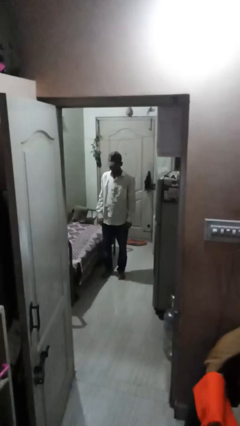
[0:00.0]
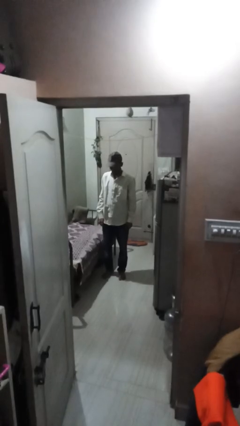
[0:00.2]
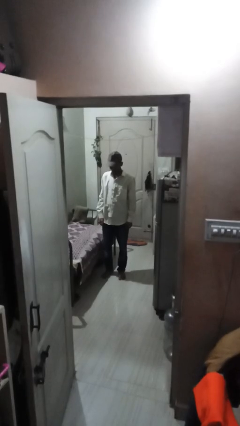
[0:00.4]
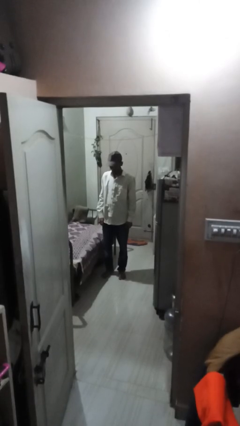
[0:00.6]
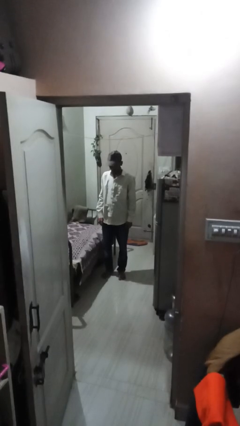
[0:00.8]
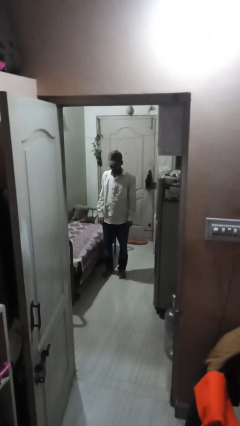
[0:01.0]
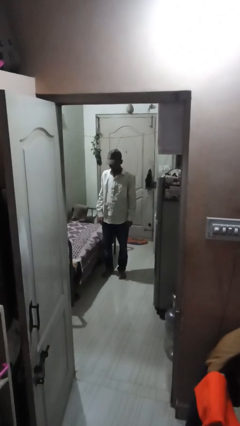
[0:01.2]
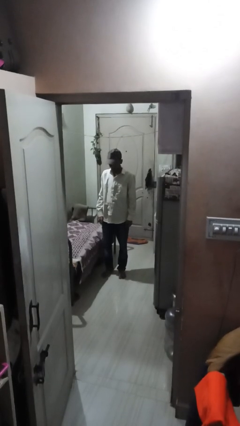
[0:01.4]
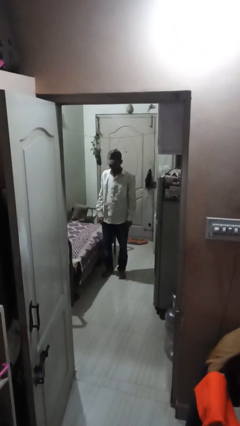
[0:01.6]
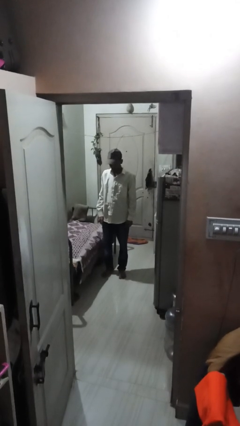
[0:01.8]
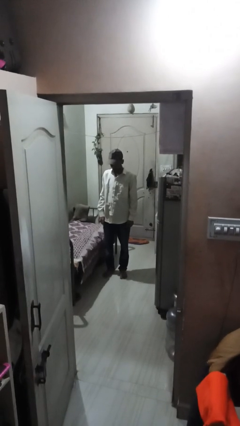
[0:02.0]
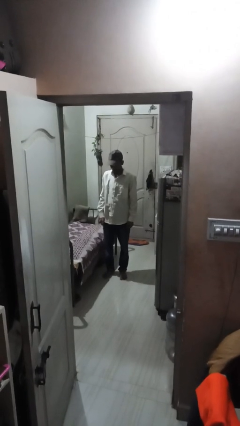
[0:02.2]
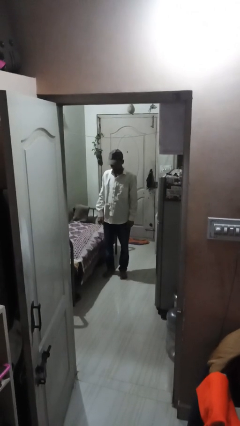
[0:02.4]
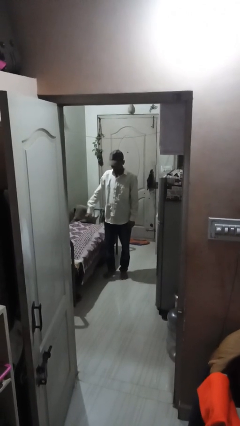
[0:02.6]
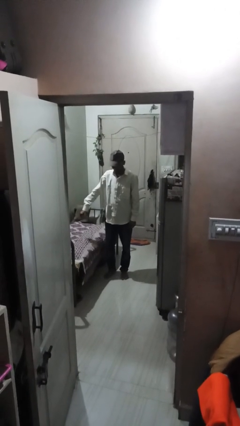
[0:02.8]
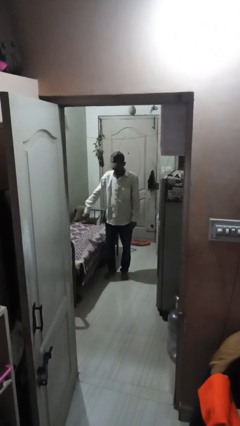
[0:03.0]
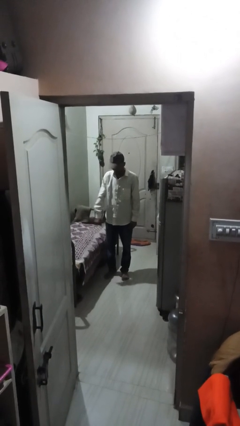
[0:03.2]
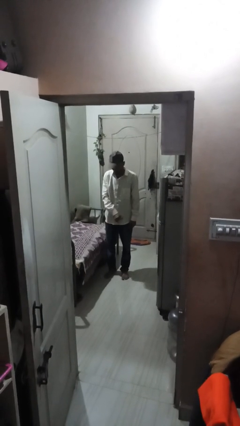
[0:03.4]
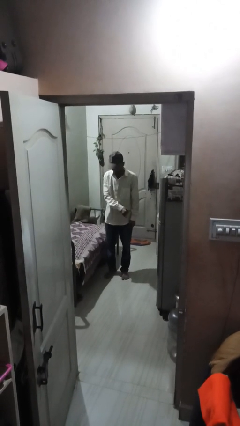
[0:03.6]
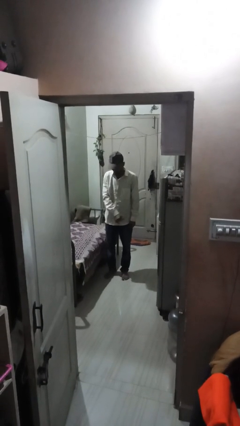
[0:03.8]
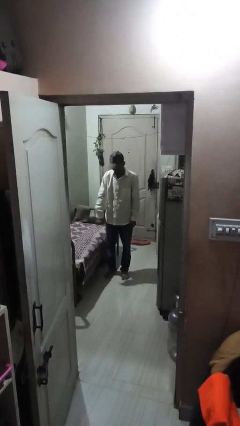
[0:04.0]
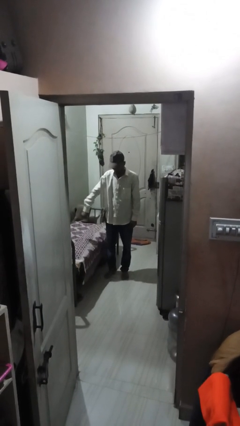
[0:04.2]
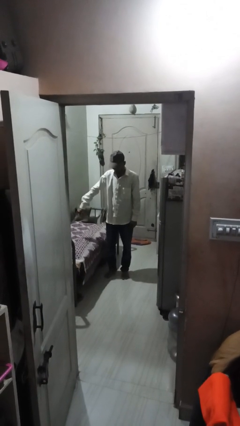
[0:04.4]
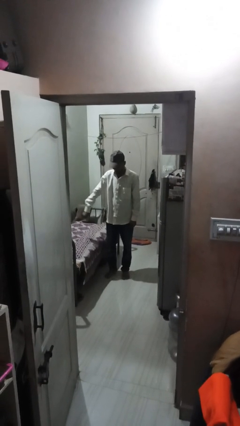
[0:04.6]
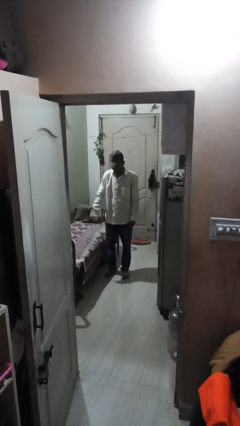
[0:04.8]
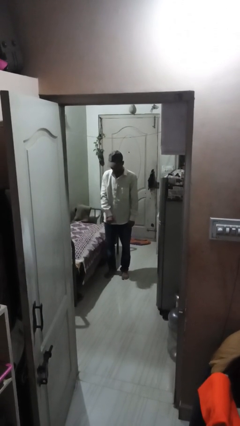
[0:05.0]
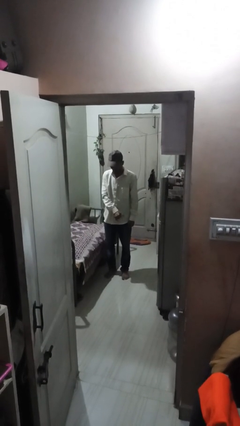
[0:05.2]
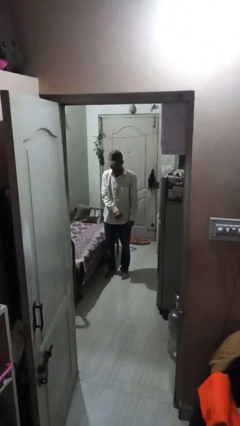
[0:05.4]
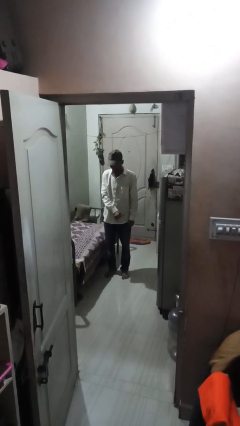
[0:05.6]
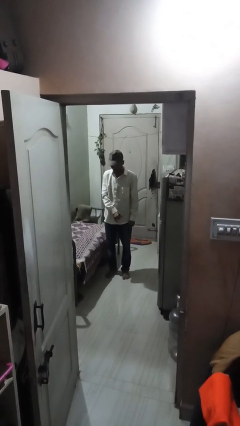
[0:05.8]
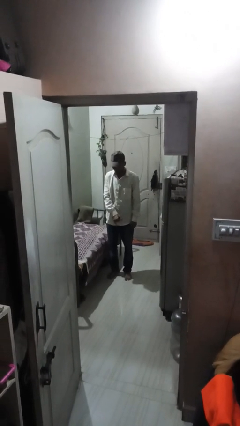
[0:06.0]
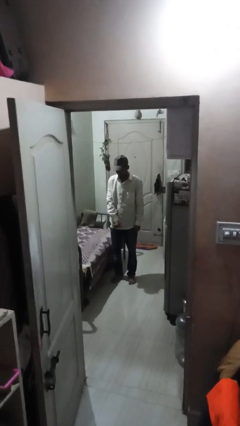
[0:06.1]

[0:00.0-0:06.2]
person gestures hang loose

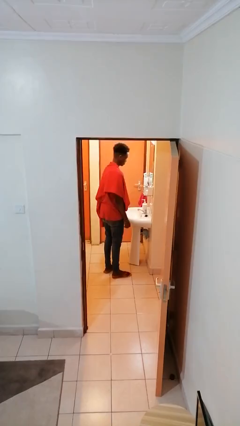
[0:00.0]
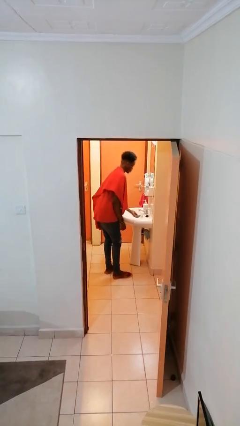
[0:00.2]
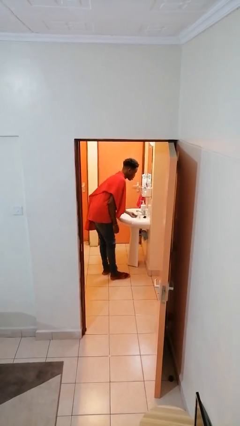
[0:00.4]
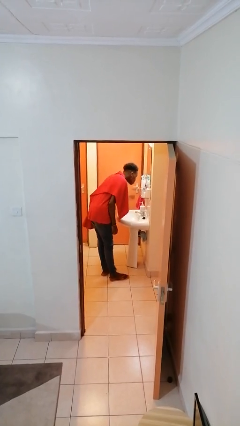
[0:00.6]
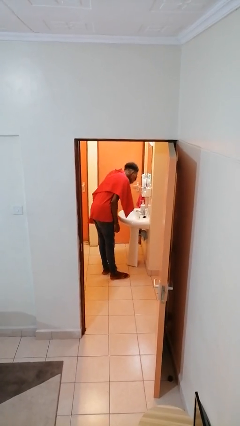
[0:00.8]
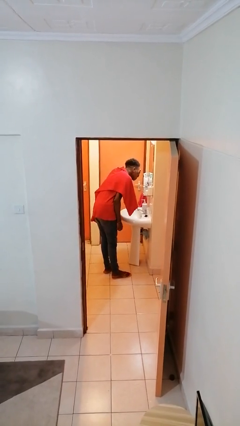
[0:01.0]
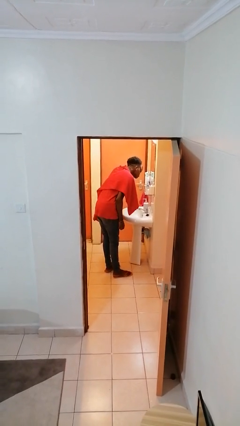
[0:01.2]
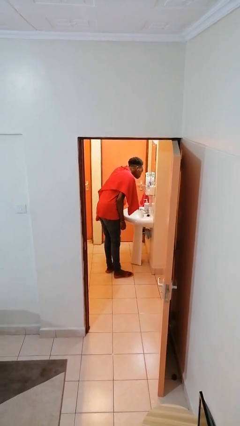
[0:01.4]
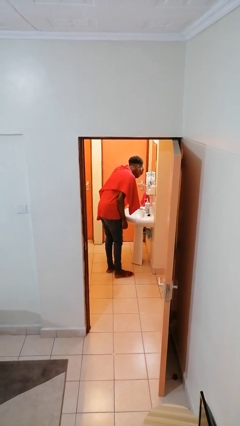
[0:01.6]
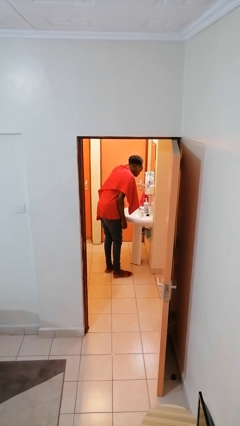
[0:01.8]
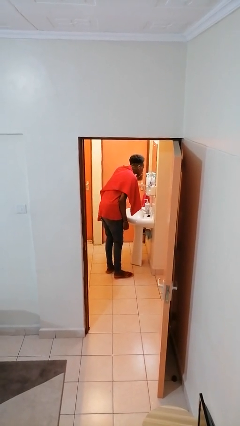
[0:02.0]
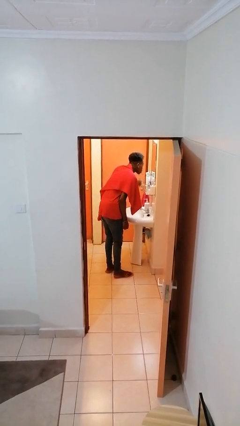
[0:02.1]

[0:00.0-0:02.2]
person washes face

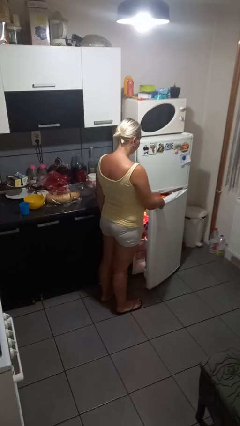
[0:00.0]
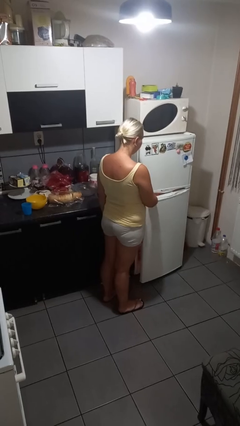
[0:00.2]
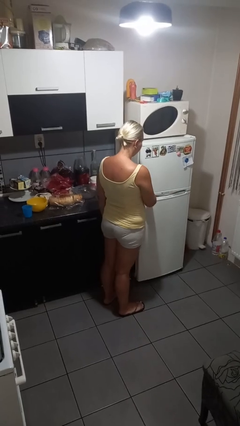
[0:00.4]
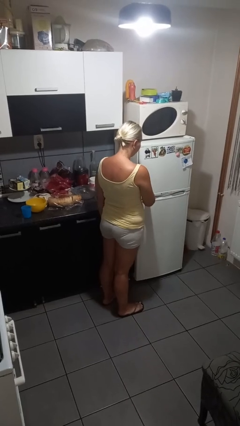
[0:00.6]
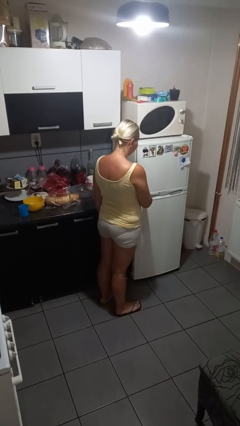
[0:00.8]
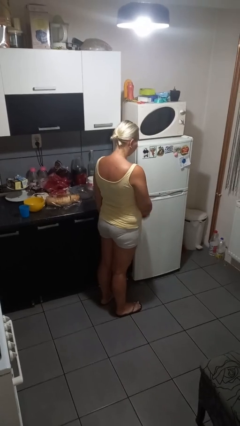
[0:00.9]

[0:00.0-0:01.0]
person closes refrigerator

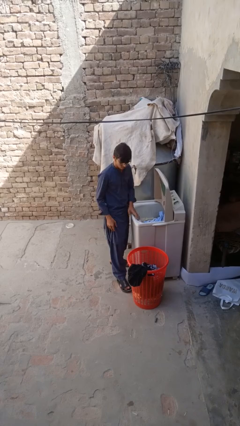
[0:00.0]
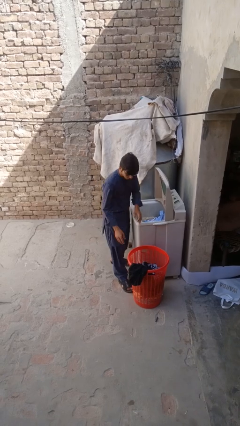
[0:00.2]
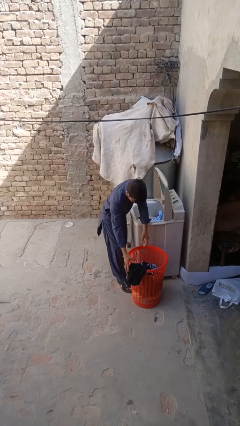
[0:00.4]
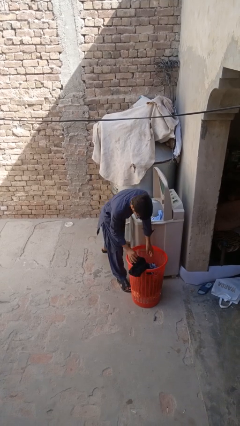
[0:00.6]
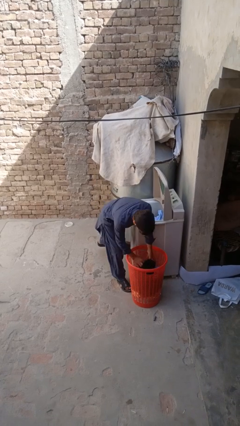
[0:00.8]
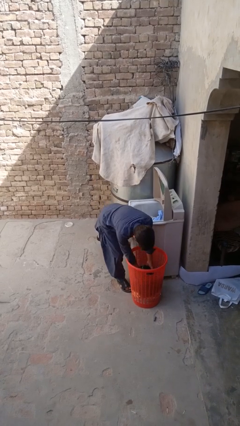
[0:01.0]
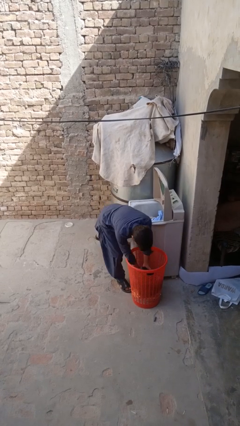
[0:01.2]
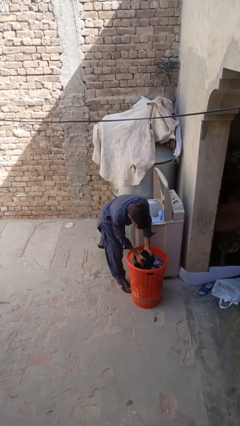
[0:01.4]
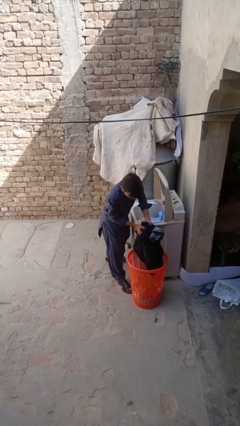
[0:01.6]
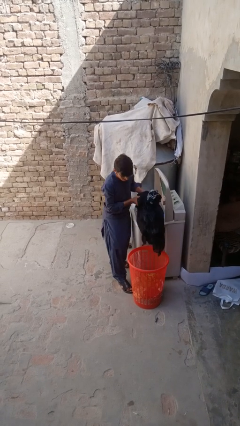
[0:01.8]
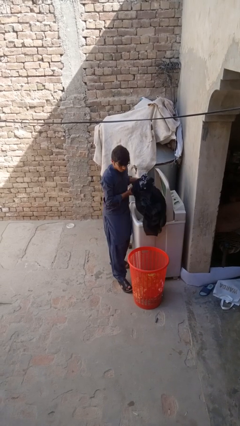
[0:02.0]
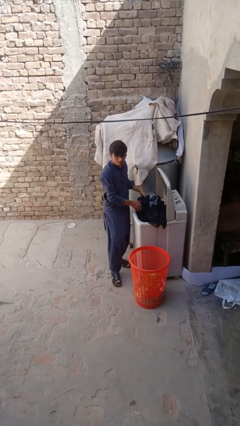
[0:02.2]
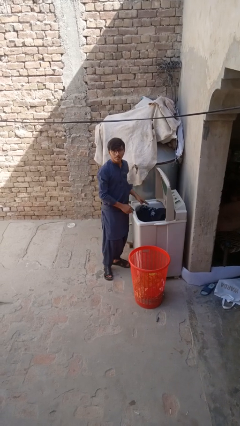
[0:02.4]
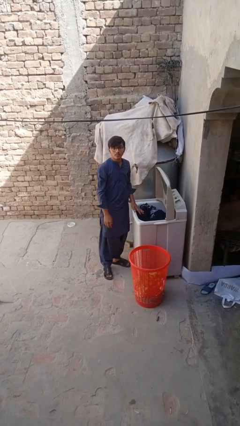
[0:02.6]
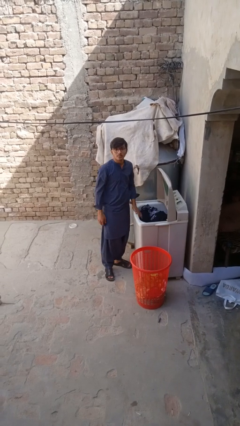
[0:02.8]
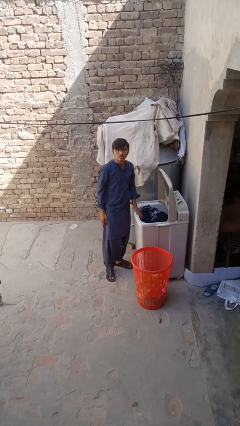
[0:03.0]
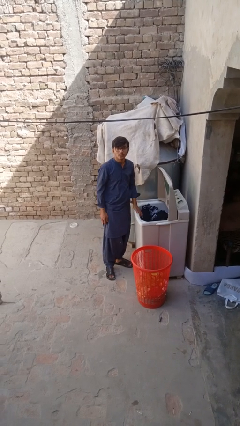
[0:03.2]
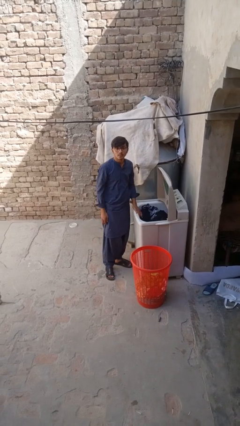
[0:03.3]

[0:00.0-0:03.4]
person loads clotheswasher

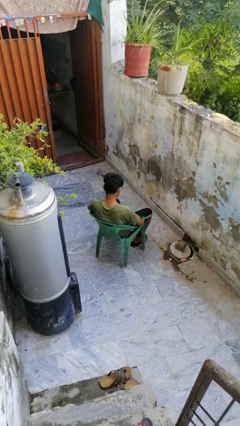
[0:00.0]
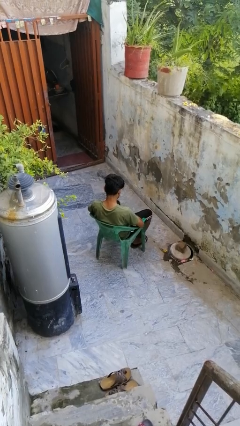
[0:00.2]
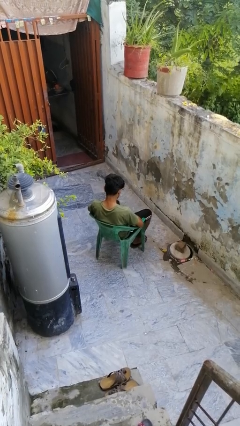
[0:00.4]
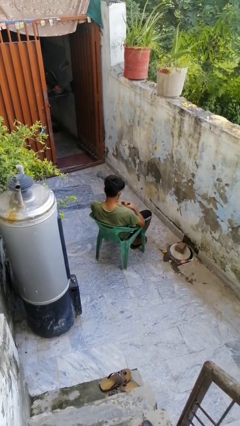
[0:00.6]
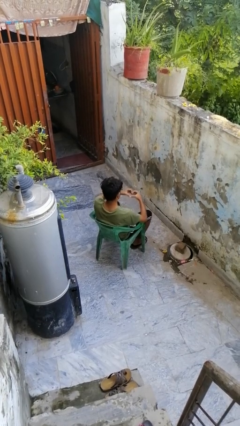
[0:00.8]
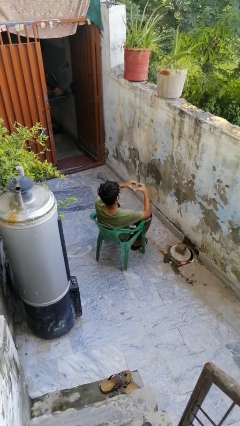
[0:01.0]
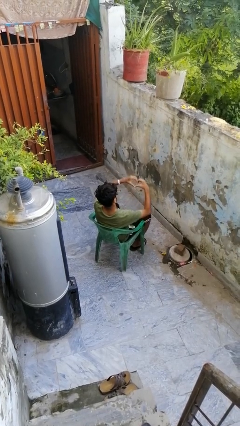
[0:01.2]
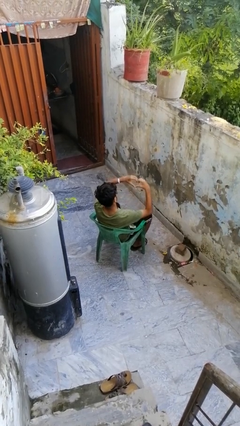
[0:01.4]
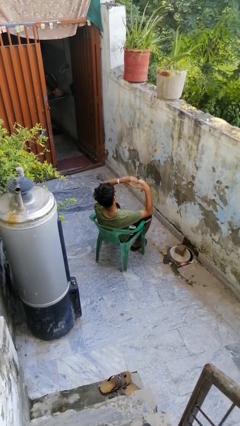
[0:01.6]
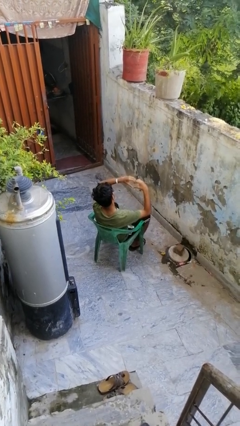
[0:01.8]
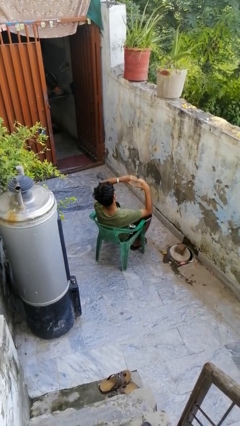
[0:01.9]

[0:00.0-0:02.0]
person gestures heart

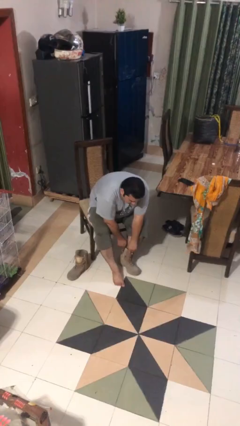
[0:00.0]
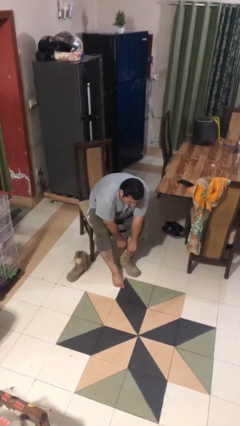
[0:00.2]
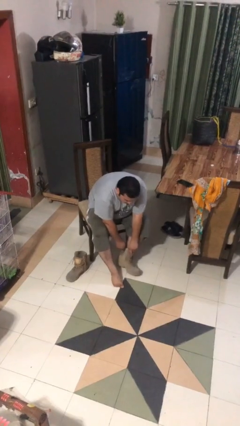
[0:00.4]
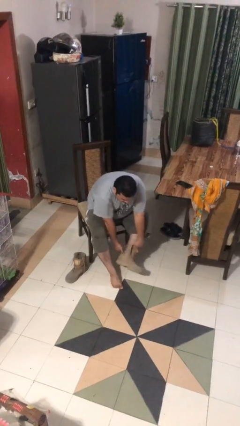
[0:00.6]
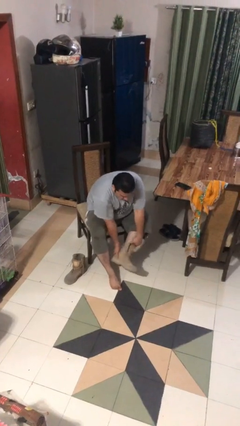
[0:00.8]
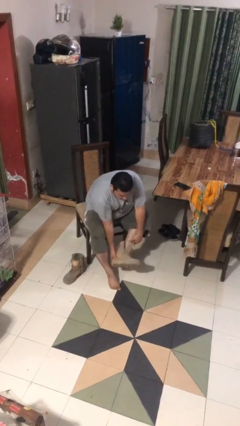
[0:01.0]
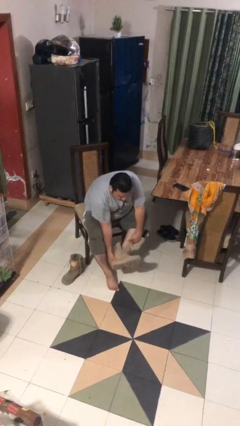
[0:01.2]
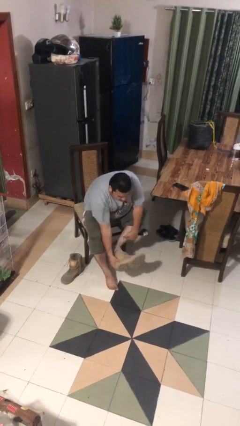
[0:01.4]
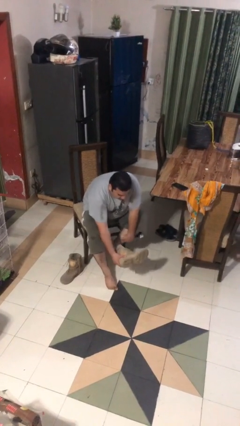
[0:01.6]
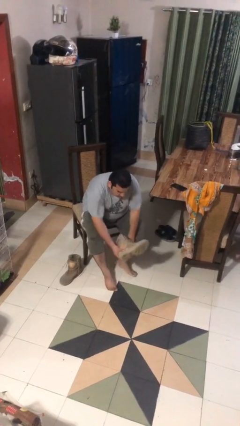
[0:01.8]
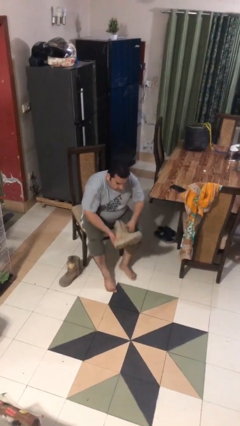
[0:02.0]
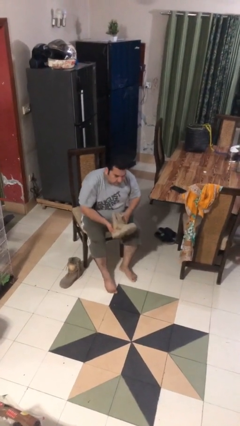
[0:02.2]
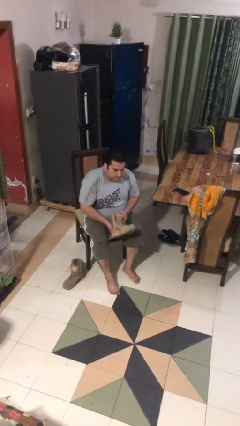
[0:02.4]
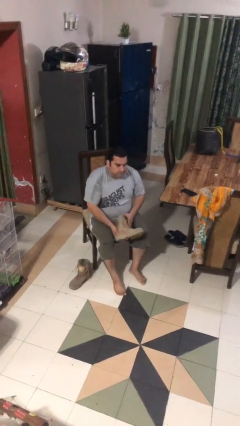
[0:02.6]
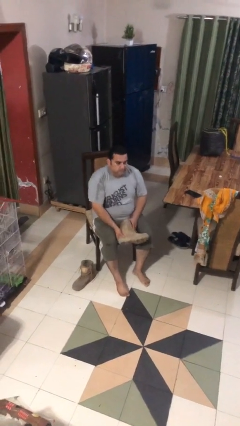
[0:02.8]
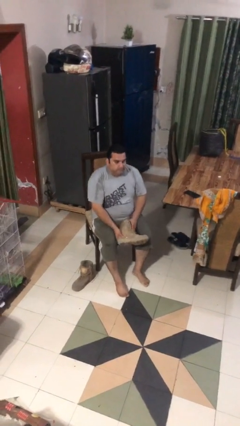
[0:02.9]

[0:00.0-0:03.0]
person takes off boots
